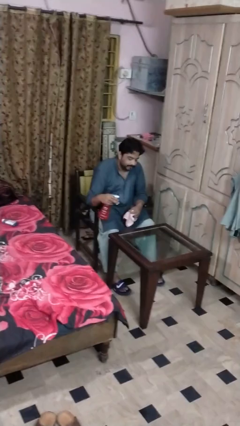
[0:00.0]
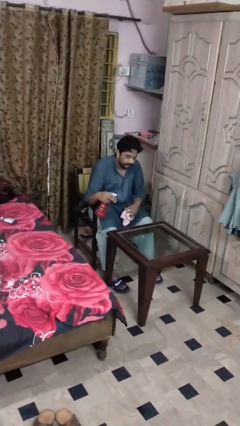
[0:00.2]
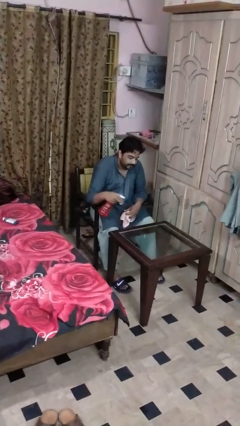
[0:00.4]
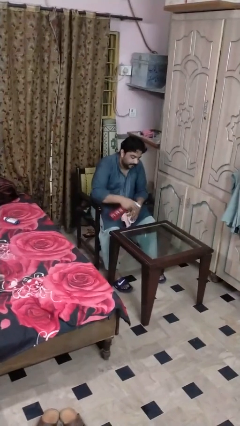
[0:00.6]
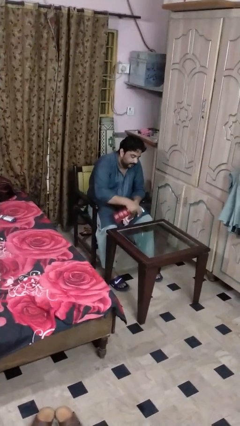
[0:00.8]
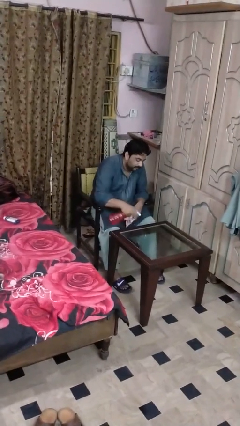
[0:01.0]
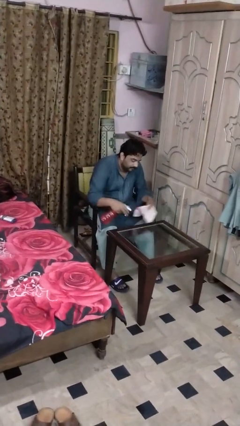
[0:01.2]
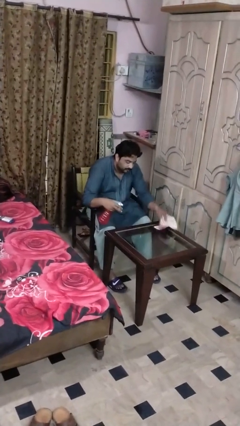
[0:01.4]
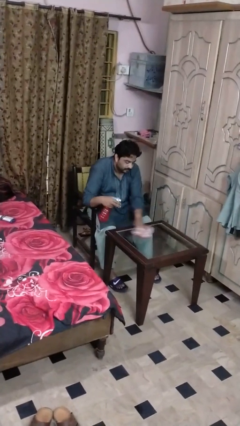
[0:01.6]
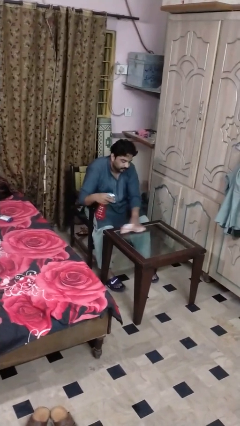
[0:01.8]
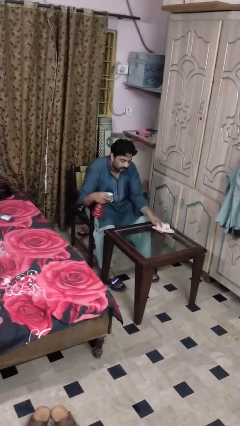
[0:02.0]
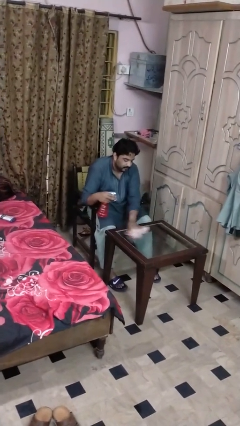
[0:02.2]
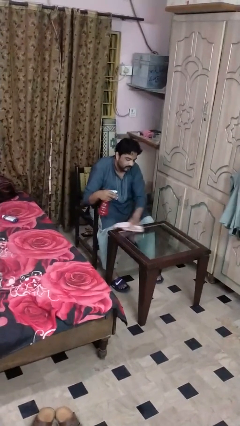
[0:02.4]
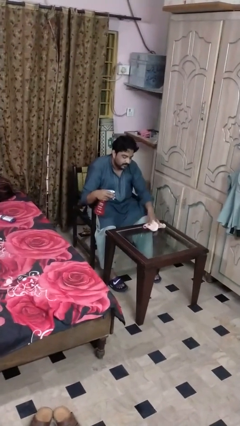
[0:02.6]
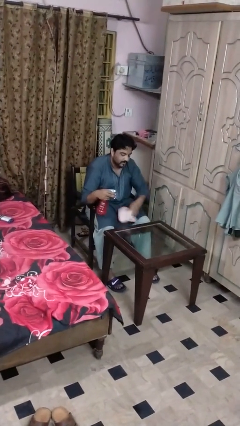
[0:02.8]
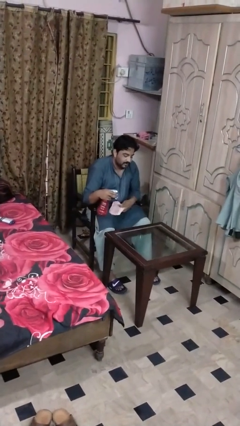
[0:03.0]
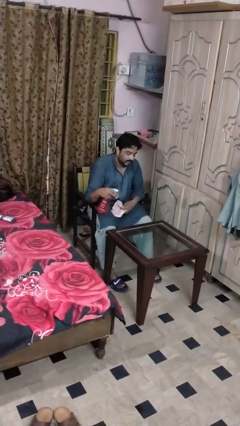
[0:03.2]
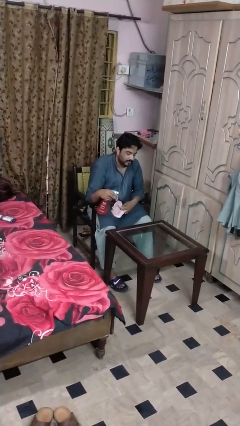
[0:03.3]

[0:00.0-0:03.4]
person cleans table with rag

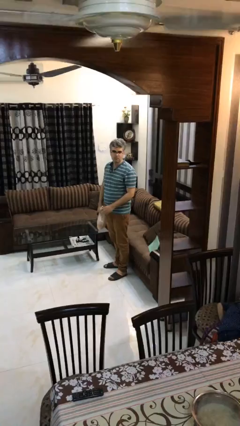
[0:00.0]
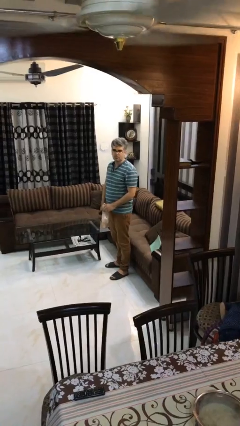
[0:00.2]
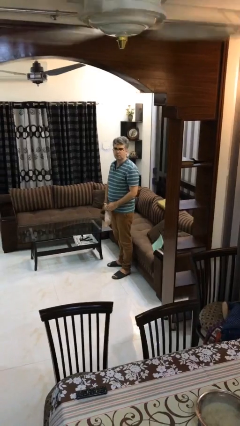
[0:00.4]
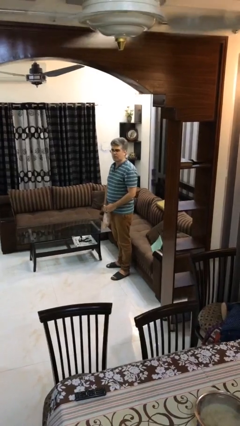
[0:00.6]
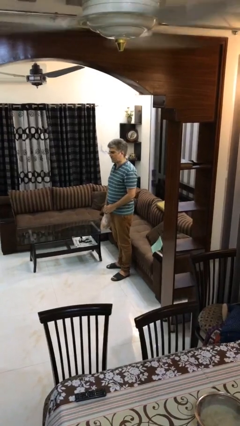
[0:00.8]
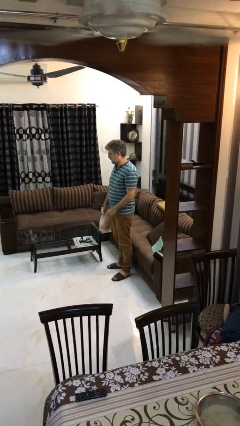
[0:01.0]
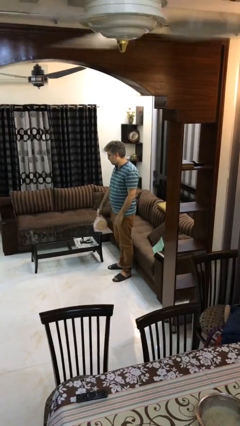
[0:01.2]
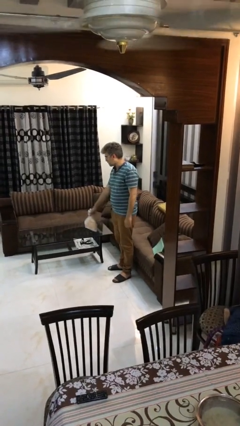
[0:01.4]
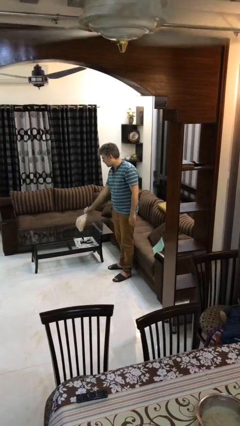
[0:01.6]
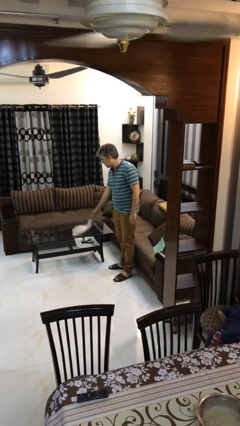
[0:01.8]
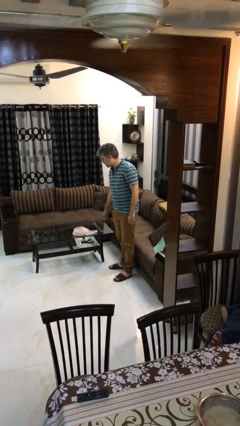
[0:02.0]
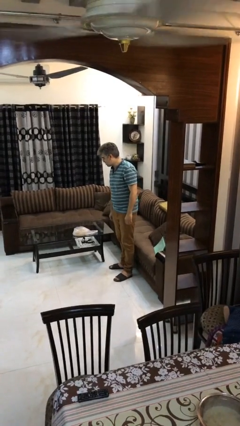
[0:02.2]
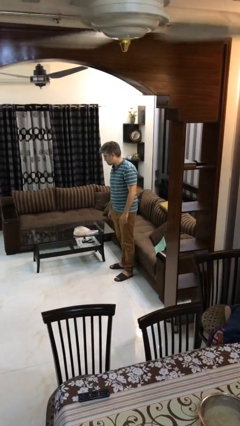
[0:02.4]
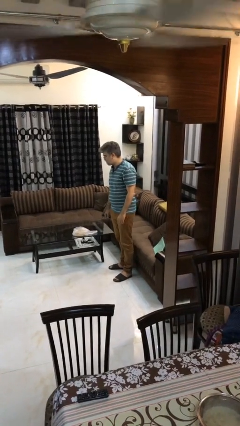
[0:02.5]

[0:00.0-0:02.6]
person puts down object on table

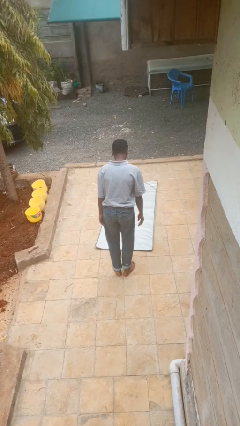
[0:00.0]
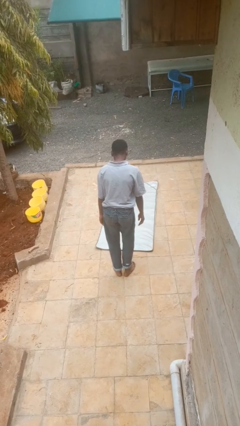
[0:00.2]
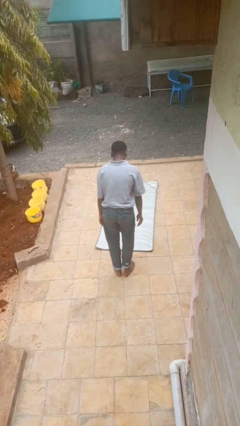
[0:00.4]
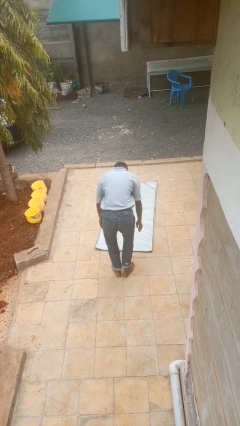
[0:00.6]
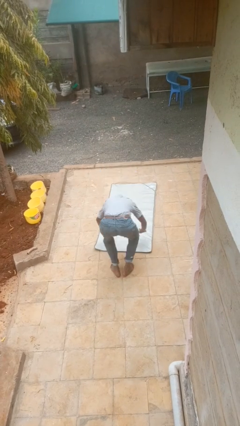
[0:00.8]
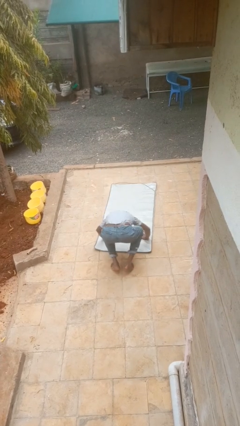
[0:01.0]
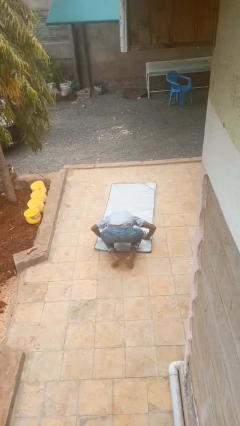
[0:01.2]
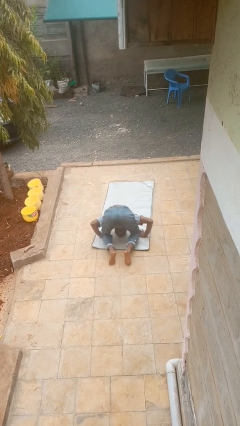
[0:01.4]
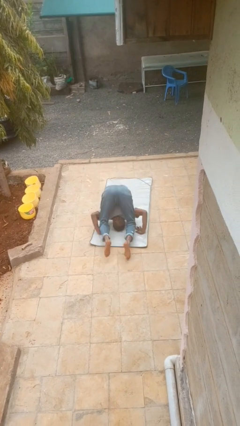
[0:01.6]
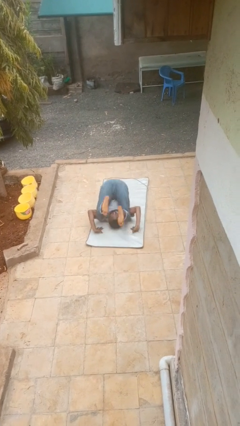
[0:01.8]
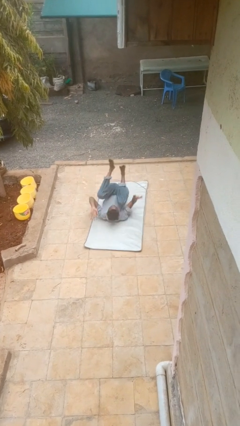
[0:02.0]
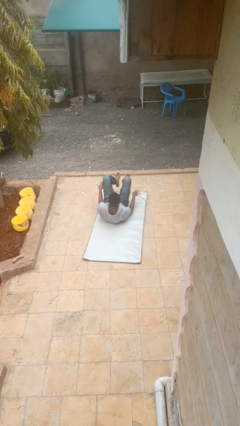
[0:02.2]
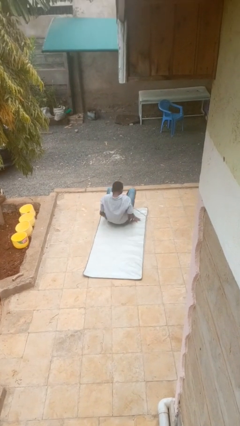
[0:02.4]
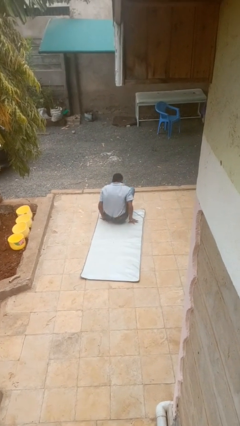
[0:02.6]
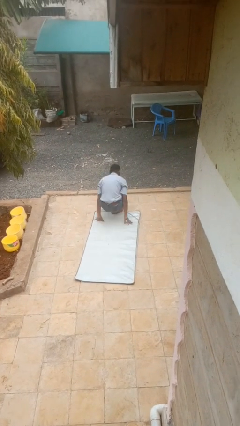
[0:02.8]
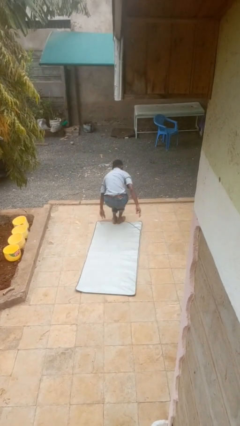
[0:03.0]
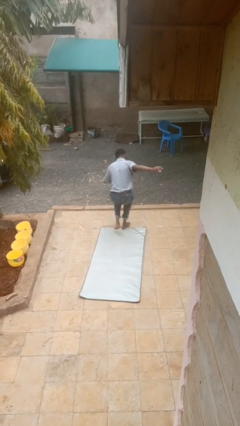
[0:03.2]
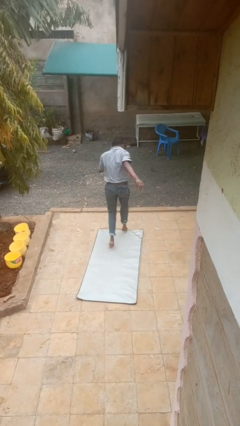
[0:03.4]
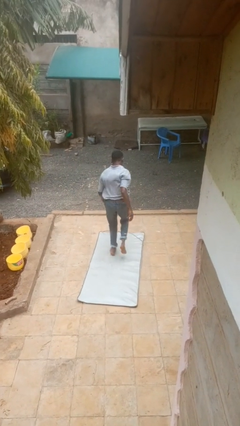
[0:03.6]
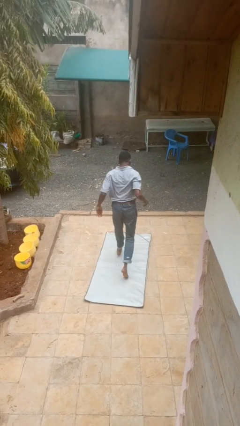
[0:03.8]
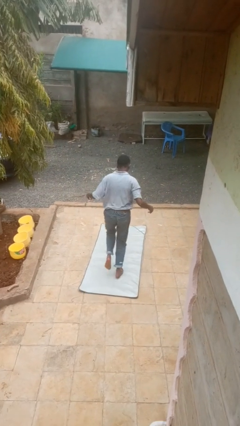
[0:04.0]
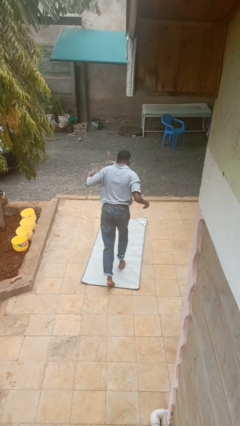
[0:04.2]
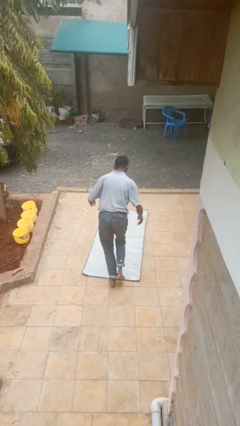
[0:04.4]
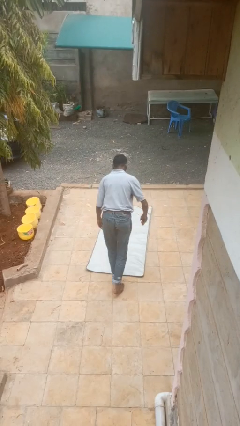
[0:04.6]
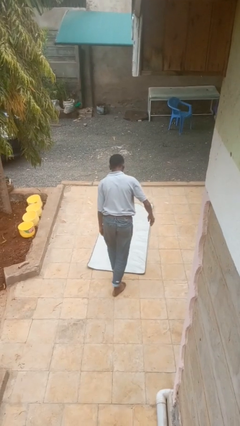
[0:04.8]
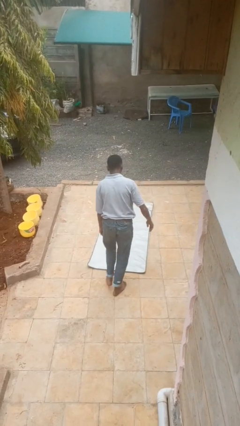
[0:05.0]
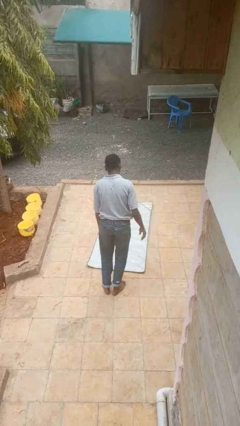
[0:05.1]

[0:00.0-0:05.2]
person somersaults

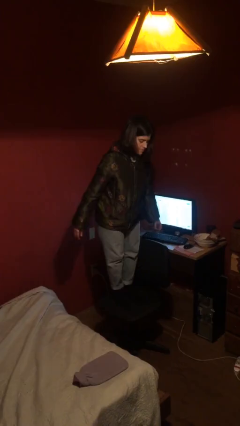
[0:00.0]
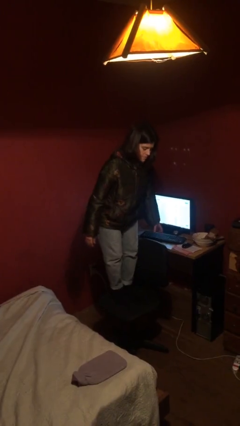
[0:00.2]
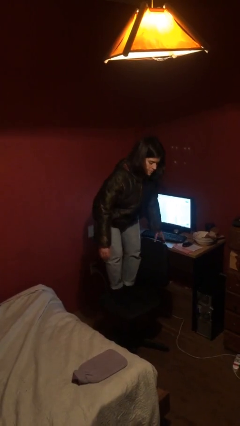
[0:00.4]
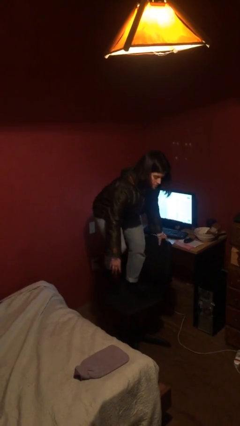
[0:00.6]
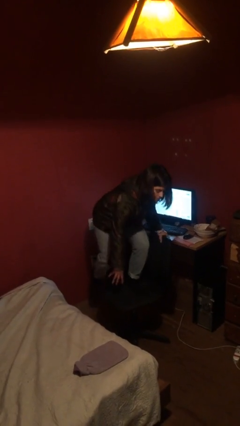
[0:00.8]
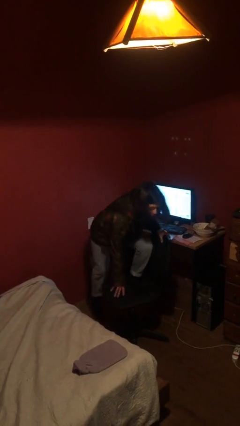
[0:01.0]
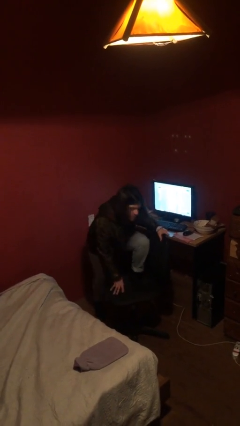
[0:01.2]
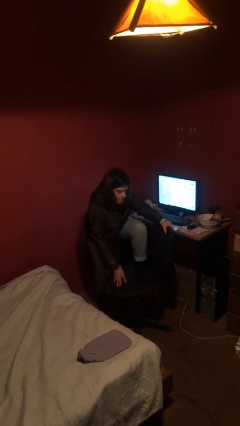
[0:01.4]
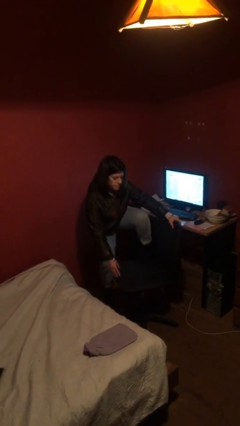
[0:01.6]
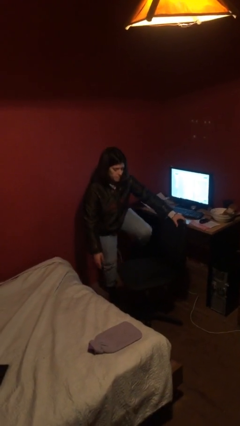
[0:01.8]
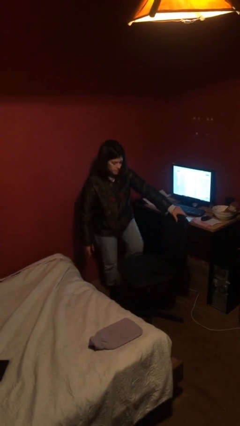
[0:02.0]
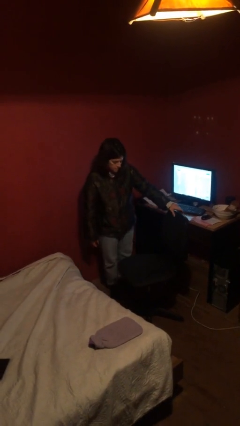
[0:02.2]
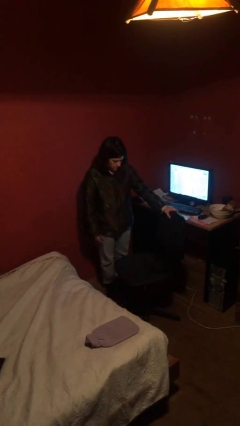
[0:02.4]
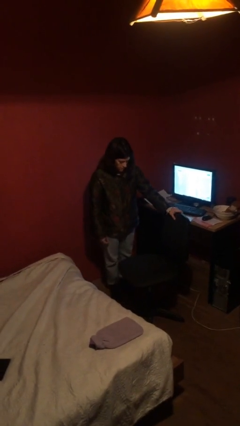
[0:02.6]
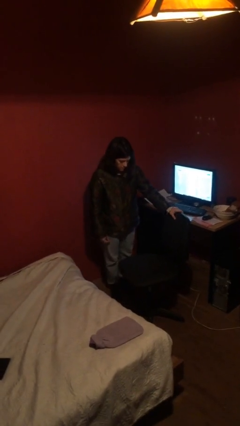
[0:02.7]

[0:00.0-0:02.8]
person climbs off chair

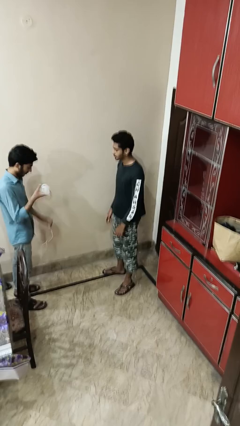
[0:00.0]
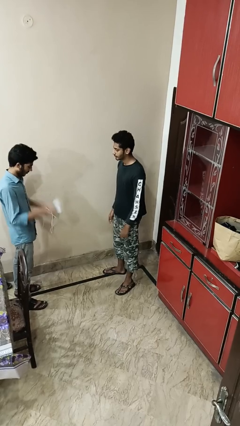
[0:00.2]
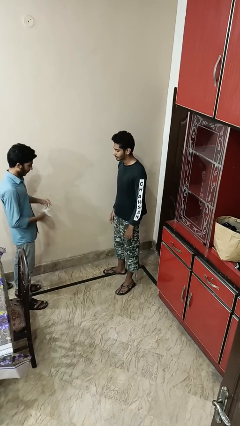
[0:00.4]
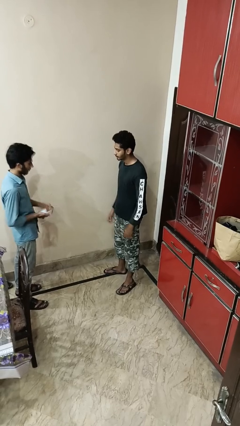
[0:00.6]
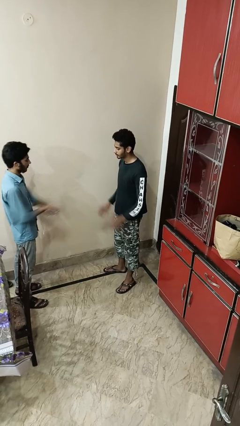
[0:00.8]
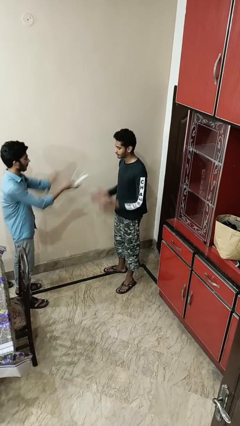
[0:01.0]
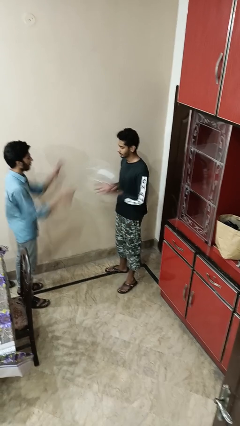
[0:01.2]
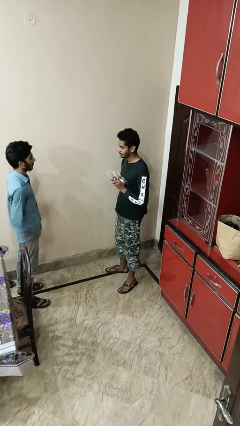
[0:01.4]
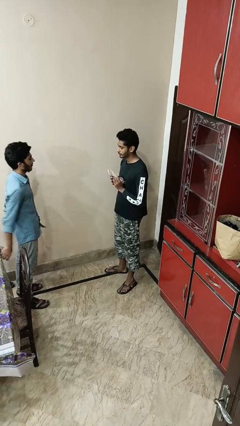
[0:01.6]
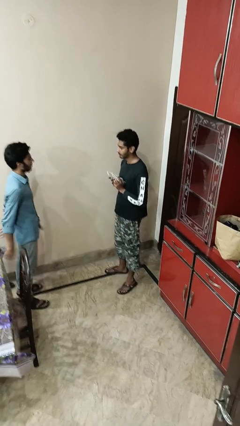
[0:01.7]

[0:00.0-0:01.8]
person catches object from person

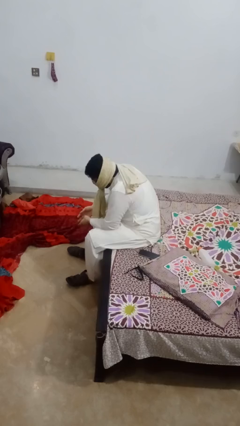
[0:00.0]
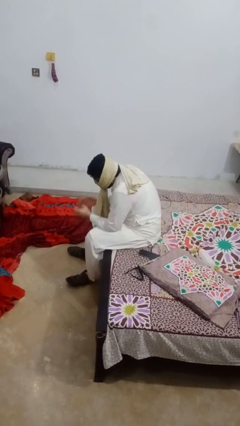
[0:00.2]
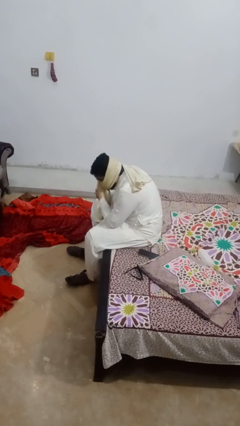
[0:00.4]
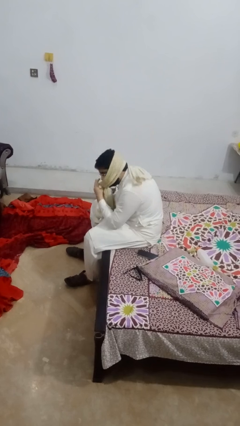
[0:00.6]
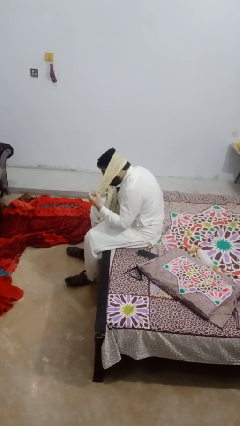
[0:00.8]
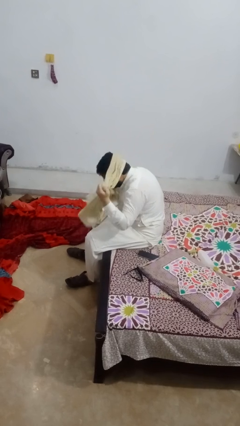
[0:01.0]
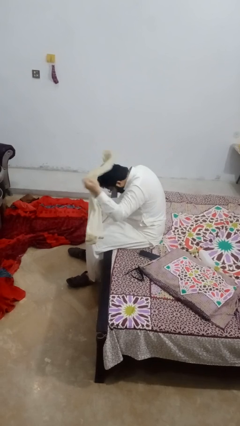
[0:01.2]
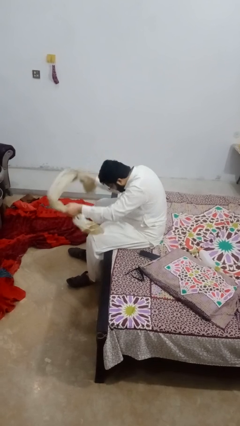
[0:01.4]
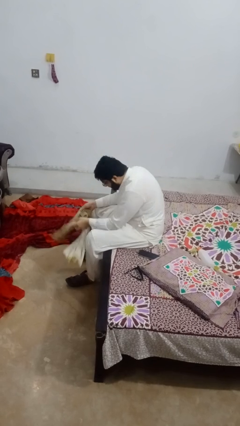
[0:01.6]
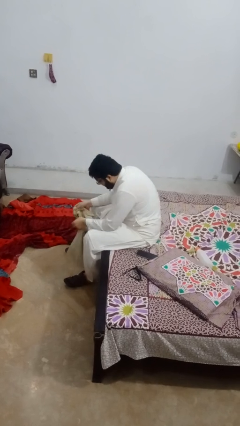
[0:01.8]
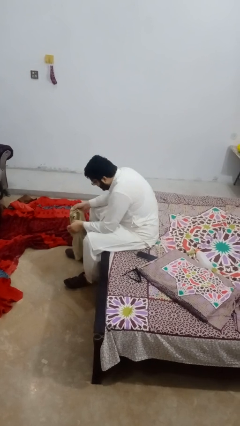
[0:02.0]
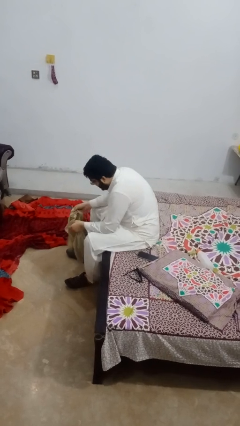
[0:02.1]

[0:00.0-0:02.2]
person takes off scarf
